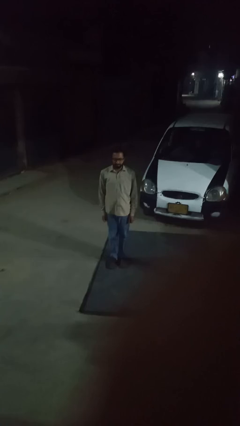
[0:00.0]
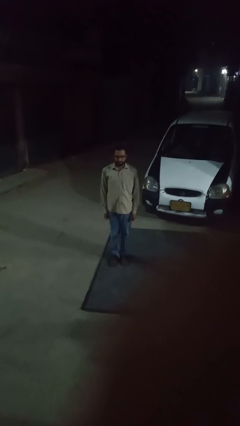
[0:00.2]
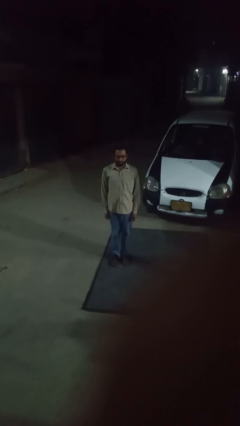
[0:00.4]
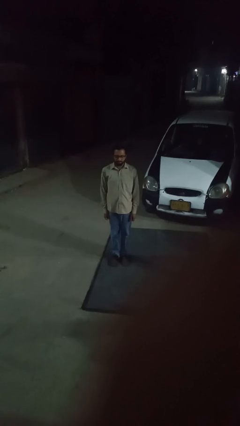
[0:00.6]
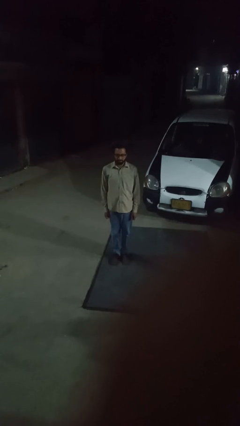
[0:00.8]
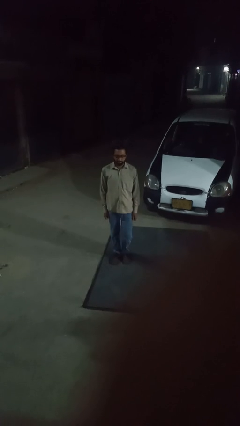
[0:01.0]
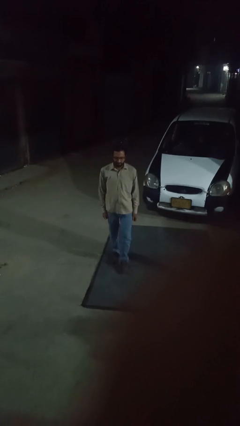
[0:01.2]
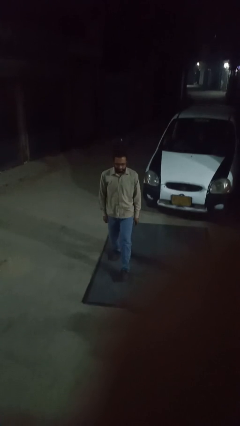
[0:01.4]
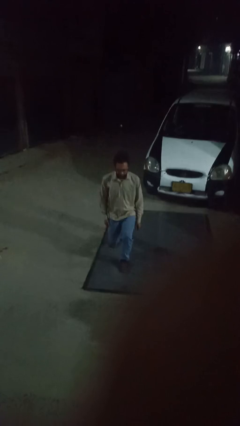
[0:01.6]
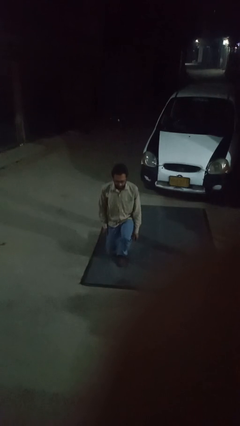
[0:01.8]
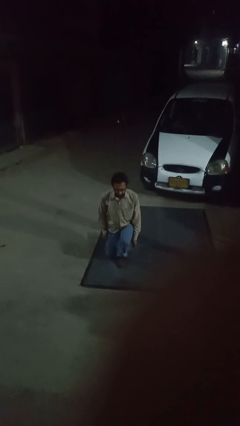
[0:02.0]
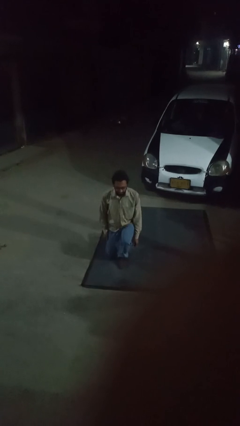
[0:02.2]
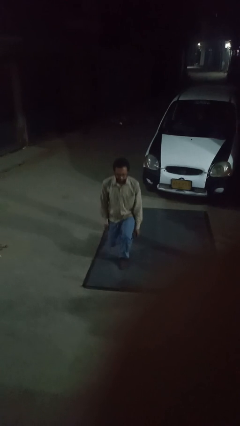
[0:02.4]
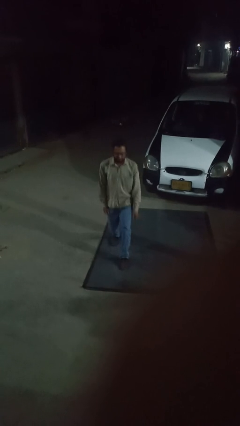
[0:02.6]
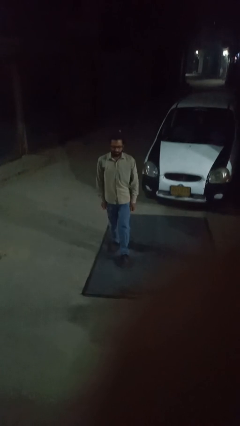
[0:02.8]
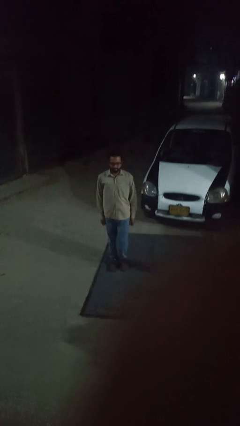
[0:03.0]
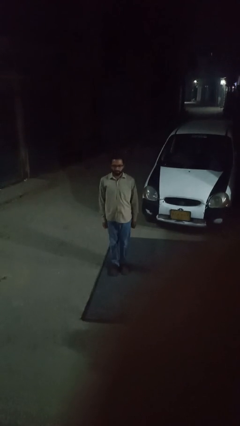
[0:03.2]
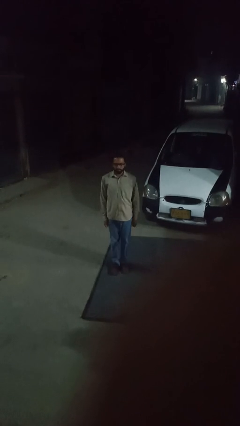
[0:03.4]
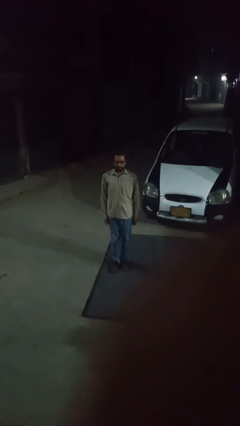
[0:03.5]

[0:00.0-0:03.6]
person exercises with lunges

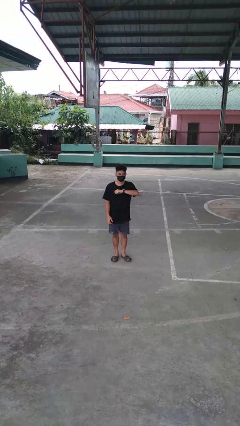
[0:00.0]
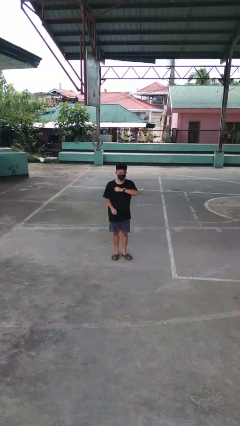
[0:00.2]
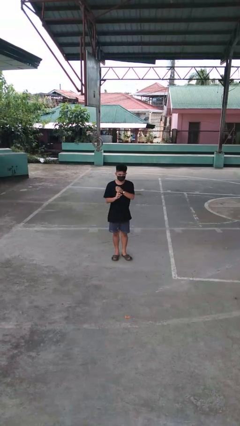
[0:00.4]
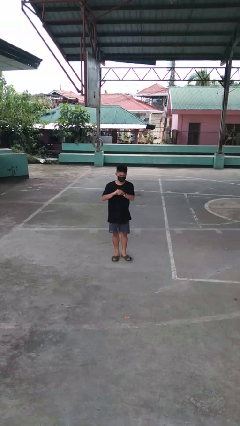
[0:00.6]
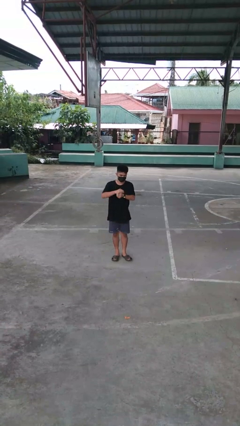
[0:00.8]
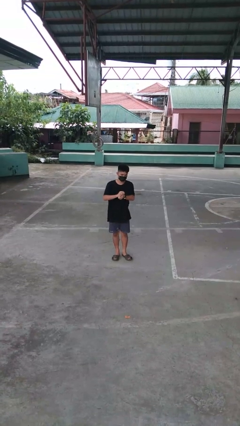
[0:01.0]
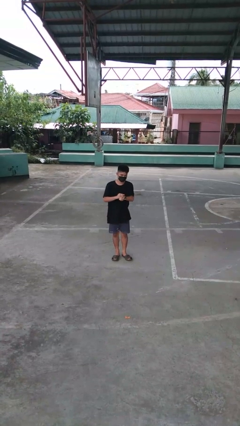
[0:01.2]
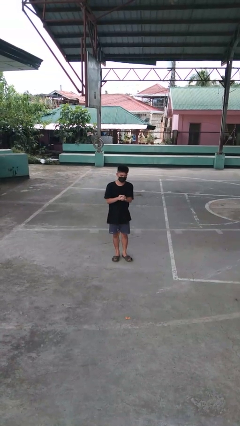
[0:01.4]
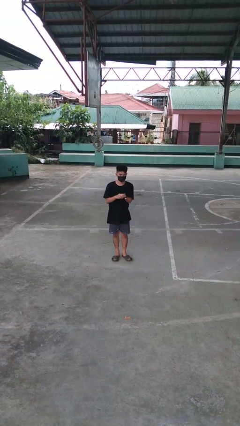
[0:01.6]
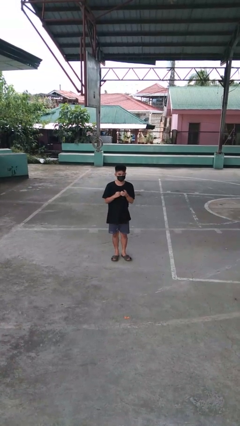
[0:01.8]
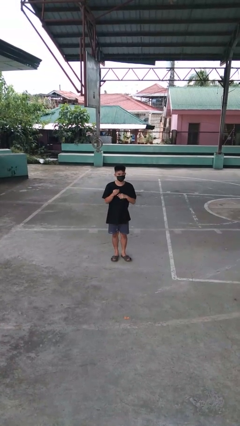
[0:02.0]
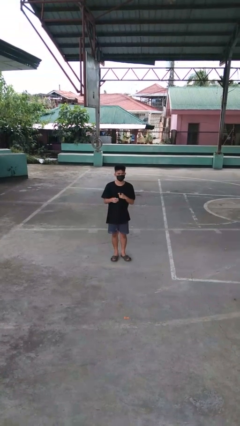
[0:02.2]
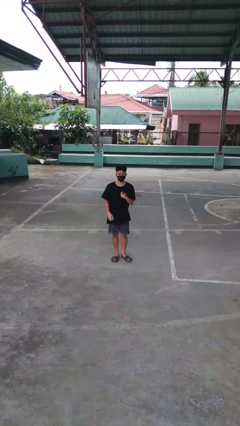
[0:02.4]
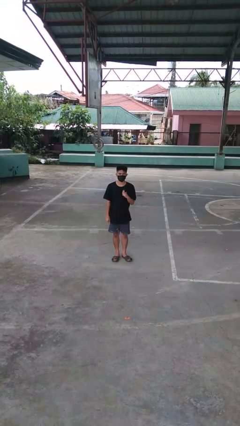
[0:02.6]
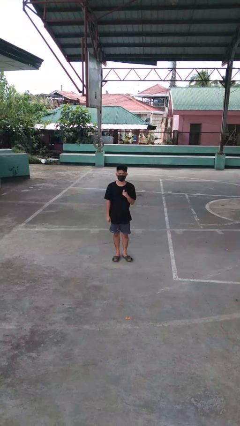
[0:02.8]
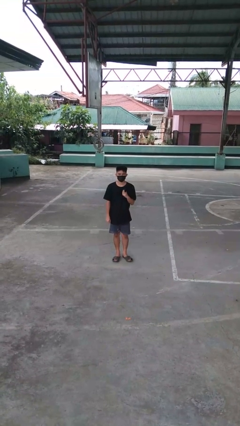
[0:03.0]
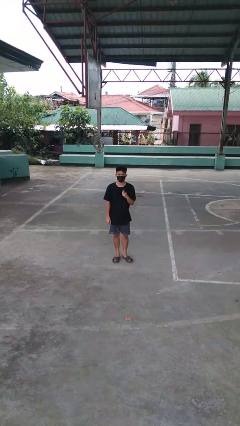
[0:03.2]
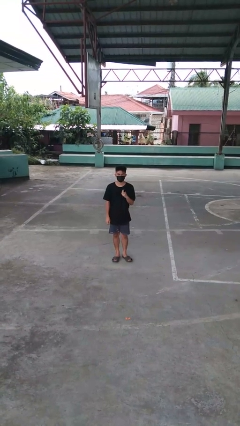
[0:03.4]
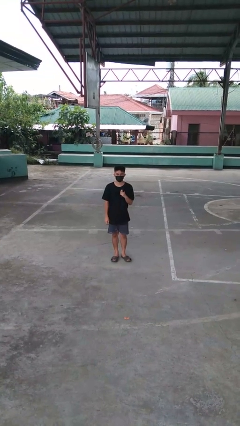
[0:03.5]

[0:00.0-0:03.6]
person takes off wristwatch

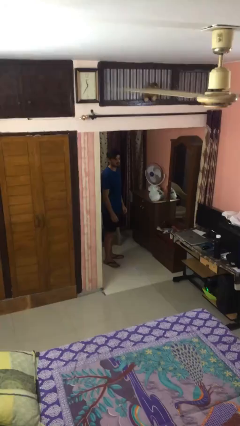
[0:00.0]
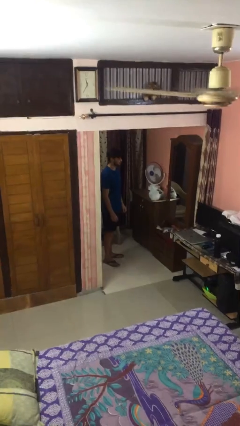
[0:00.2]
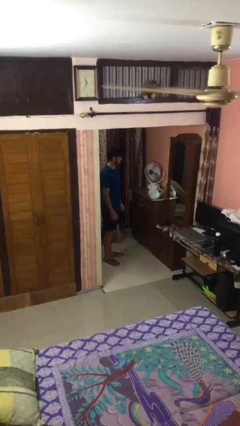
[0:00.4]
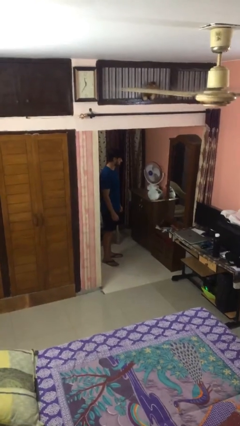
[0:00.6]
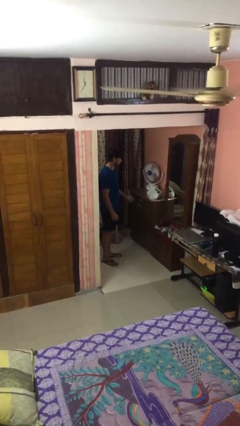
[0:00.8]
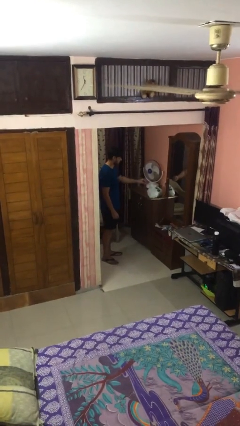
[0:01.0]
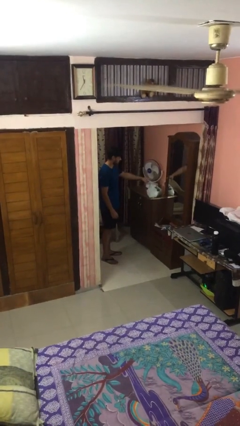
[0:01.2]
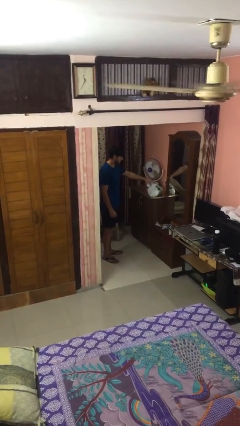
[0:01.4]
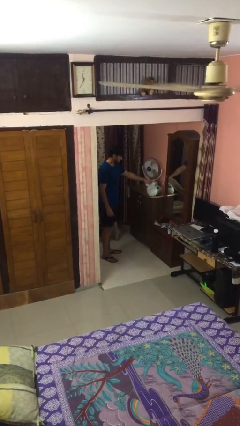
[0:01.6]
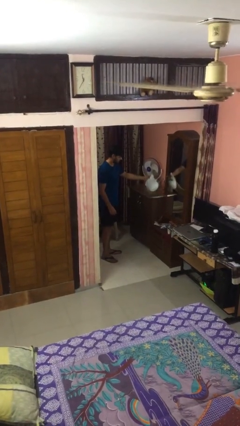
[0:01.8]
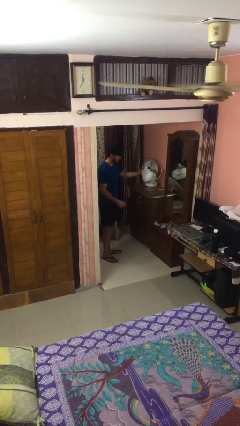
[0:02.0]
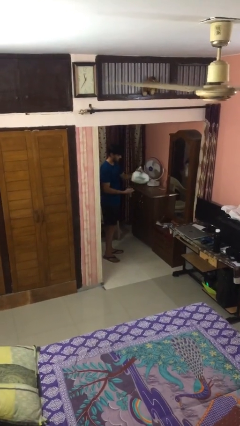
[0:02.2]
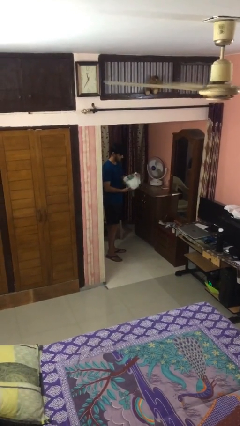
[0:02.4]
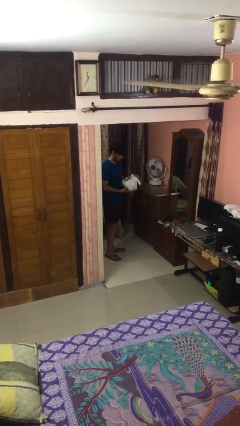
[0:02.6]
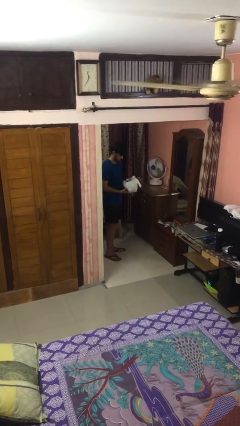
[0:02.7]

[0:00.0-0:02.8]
person picks up object from countertop

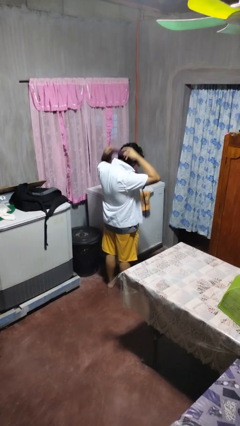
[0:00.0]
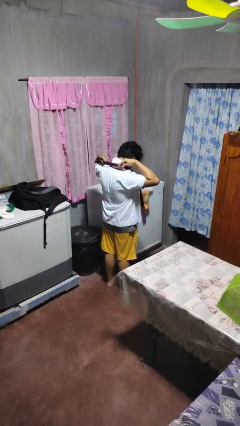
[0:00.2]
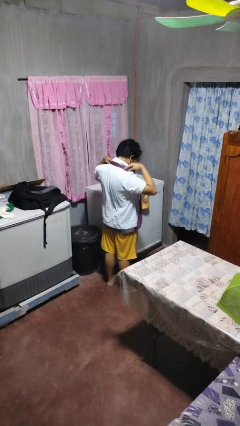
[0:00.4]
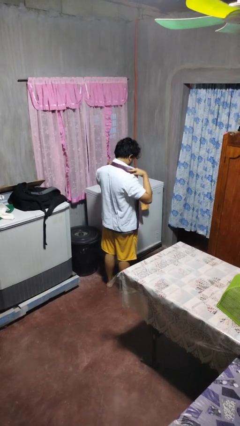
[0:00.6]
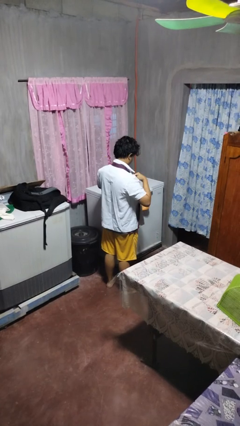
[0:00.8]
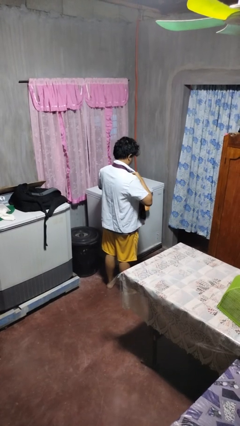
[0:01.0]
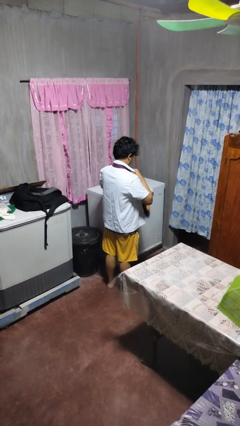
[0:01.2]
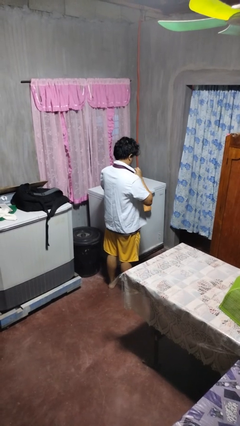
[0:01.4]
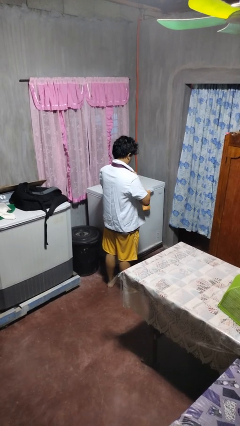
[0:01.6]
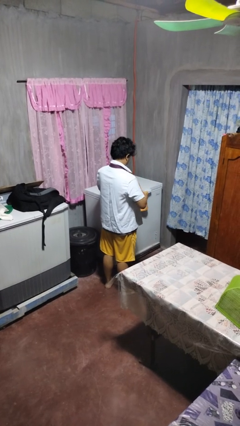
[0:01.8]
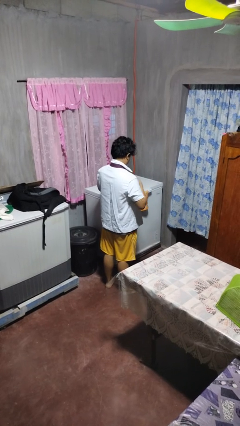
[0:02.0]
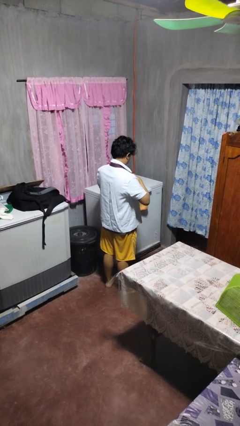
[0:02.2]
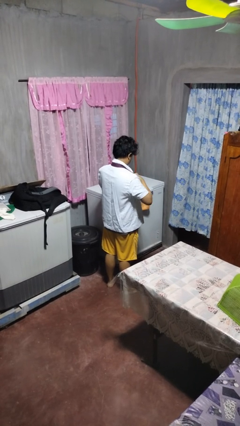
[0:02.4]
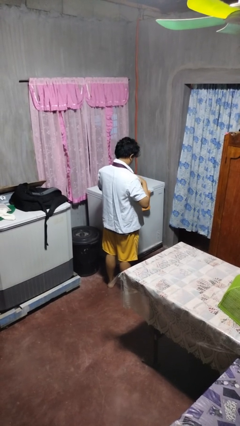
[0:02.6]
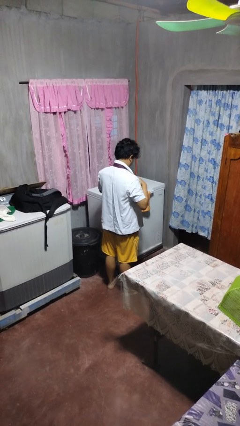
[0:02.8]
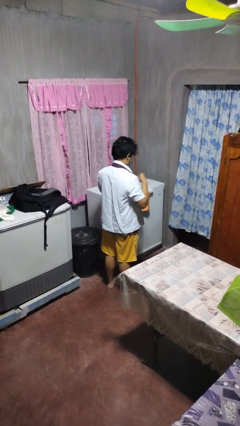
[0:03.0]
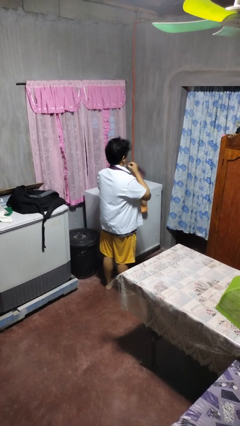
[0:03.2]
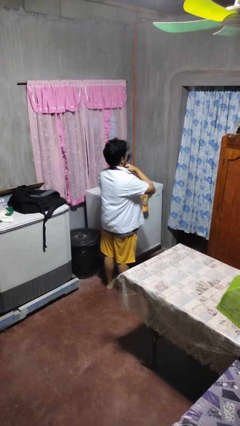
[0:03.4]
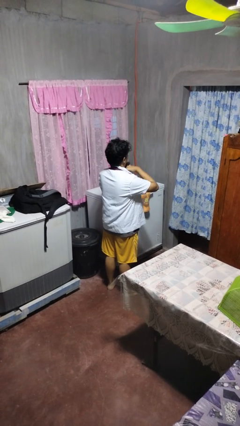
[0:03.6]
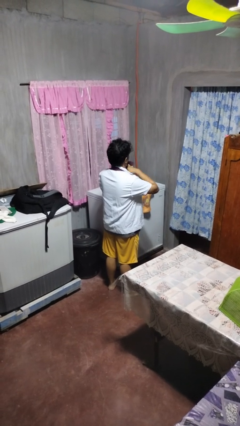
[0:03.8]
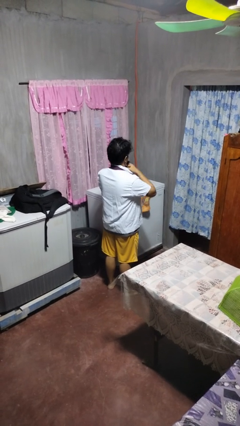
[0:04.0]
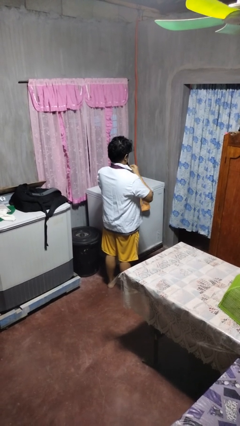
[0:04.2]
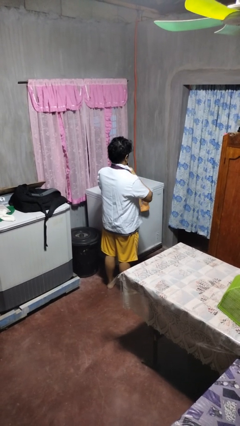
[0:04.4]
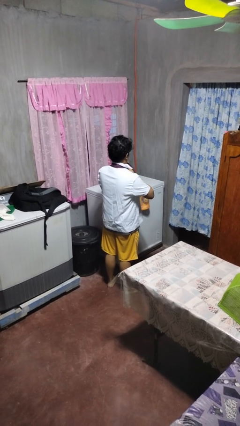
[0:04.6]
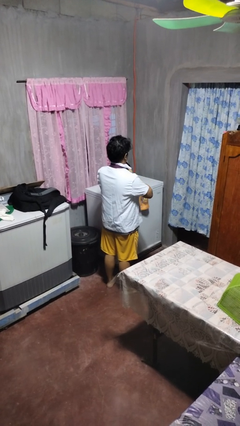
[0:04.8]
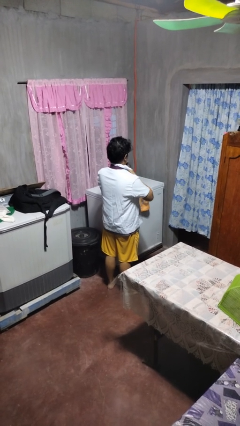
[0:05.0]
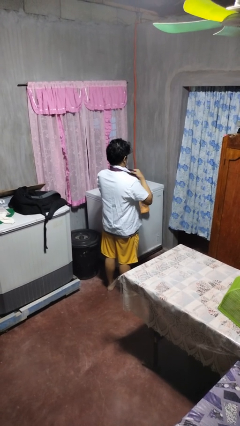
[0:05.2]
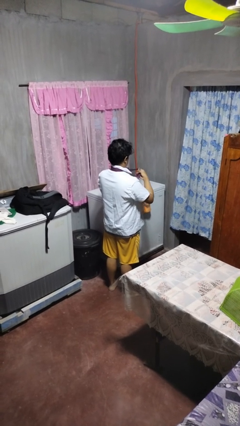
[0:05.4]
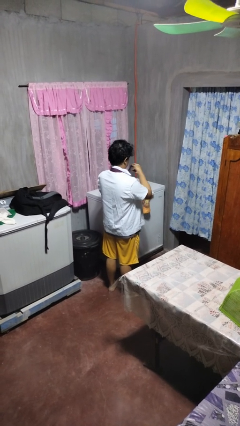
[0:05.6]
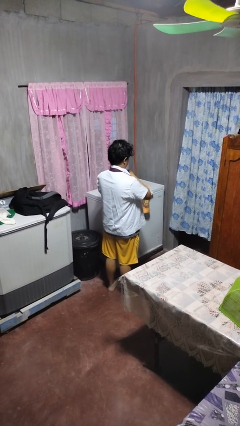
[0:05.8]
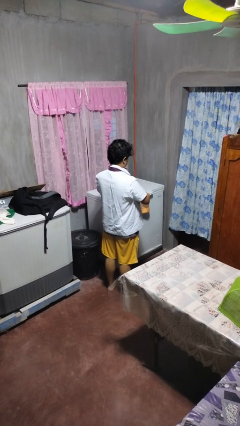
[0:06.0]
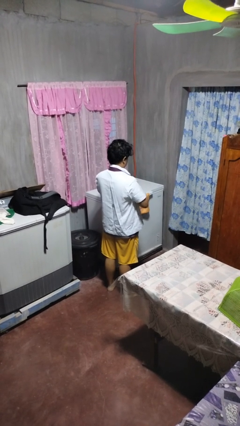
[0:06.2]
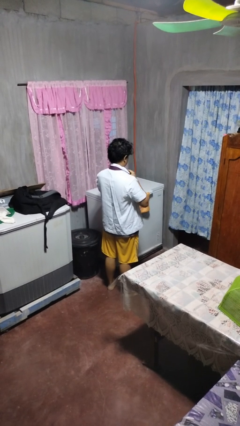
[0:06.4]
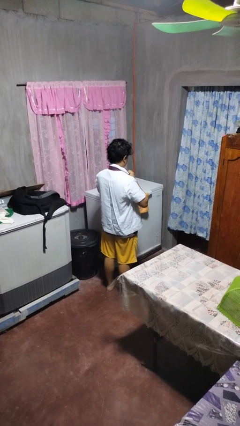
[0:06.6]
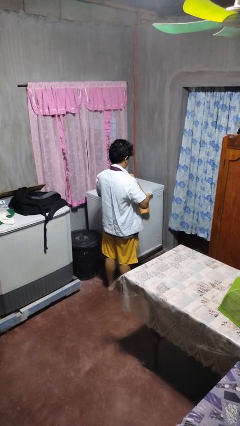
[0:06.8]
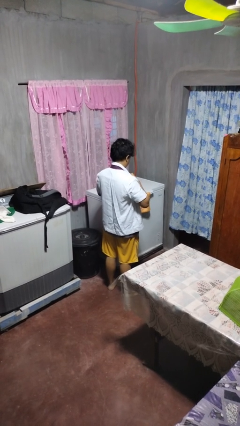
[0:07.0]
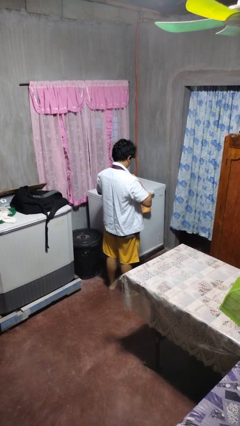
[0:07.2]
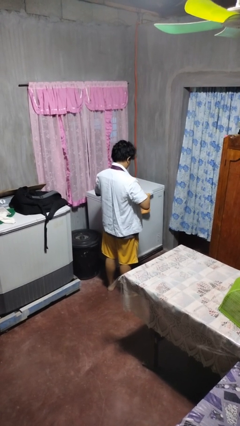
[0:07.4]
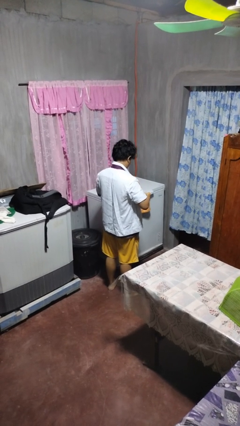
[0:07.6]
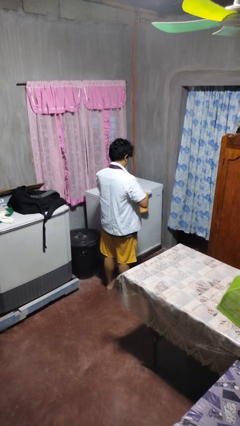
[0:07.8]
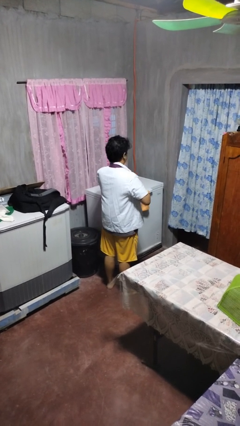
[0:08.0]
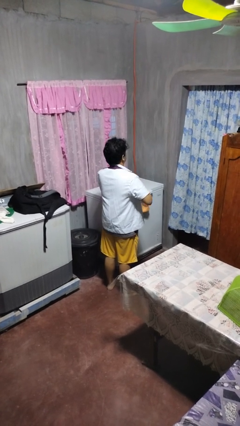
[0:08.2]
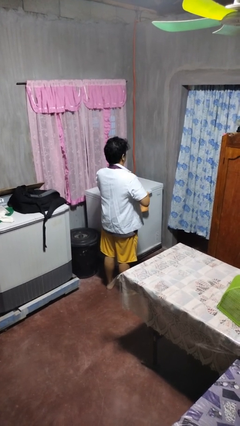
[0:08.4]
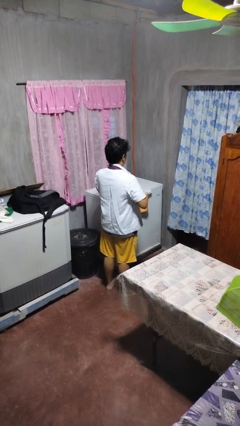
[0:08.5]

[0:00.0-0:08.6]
person puts on necktie
